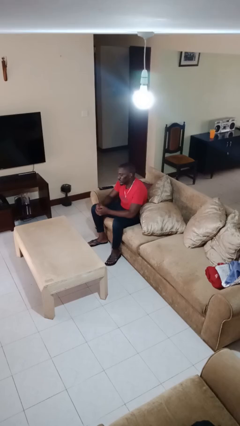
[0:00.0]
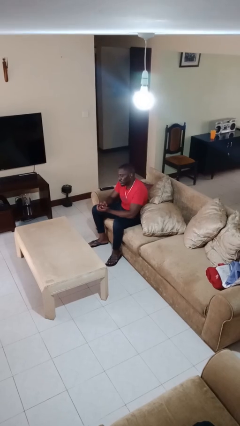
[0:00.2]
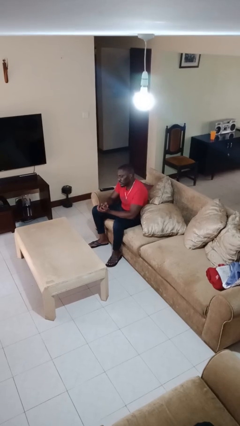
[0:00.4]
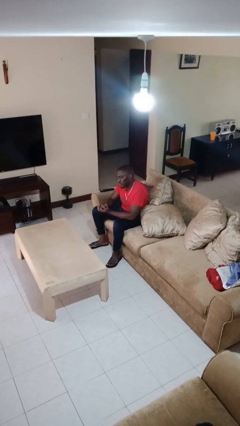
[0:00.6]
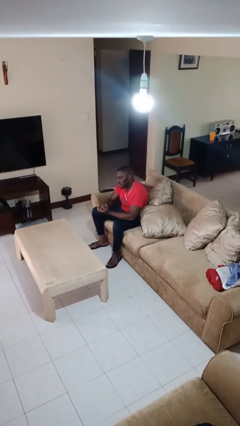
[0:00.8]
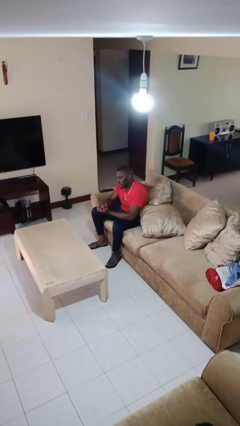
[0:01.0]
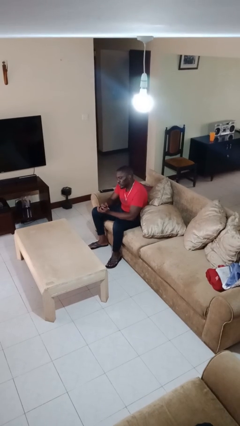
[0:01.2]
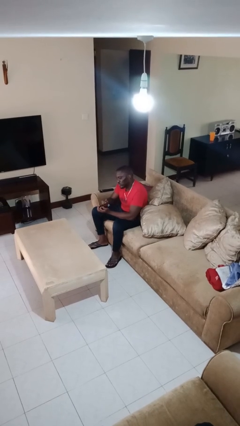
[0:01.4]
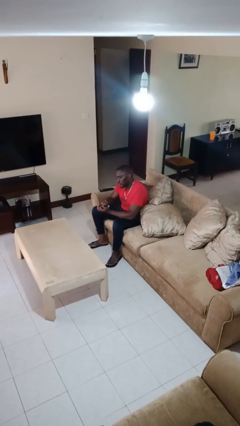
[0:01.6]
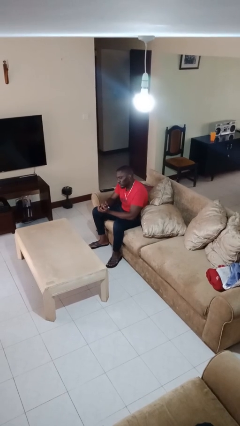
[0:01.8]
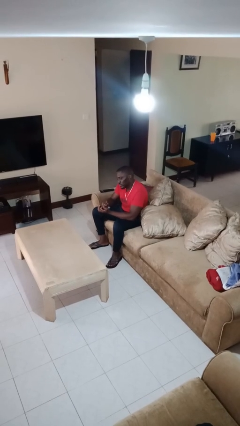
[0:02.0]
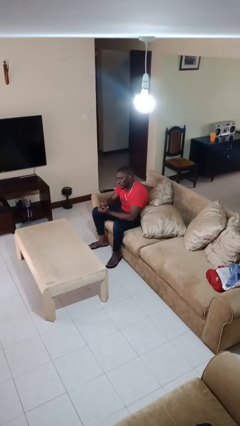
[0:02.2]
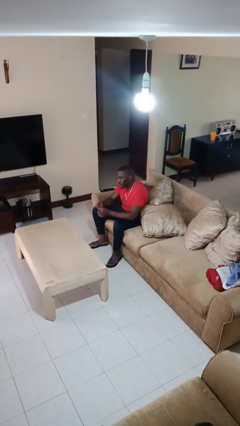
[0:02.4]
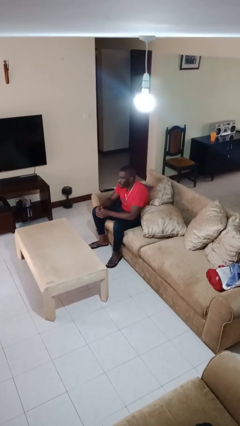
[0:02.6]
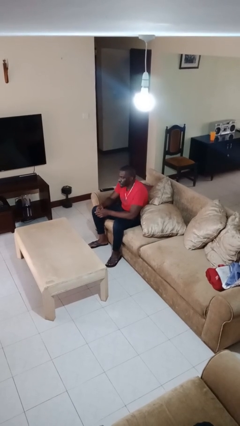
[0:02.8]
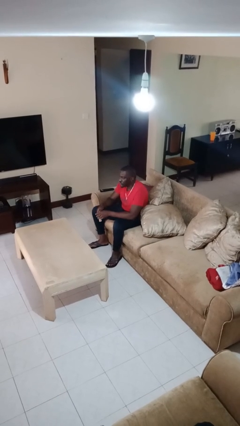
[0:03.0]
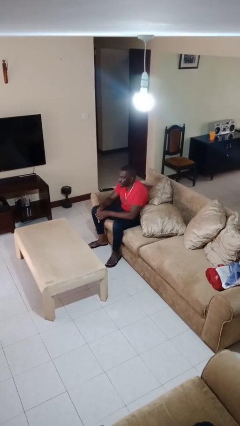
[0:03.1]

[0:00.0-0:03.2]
person clips fingernails

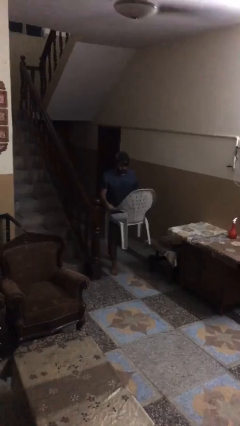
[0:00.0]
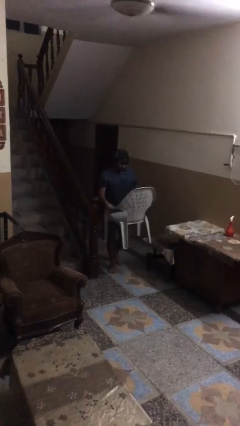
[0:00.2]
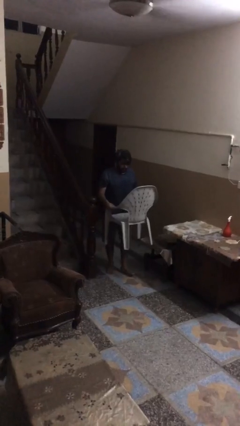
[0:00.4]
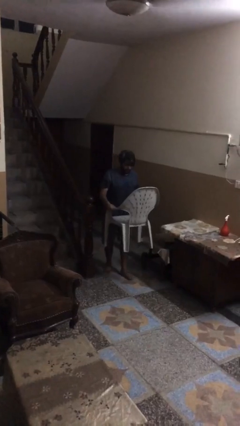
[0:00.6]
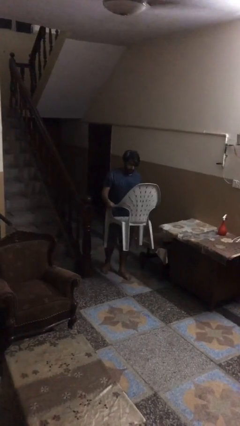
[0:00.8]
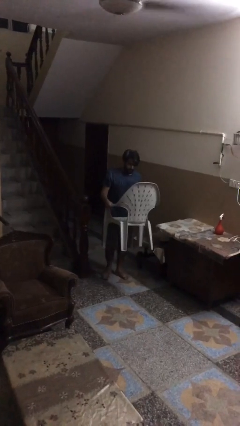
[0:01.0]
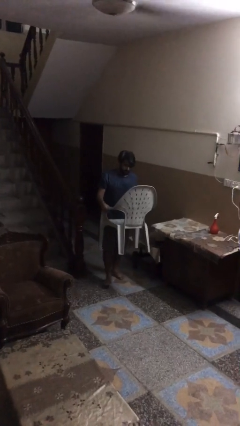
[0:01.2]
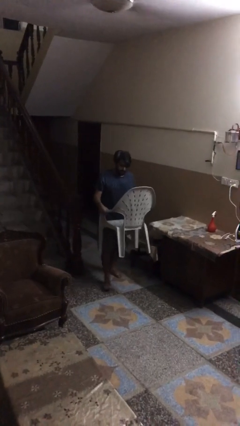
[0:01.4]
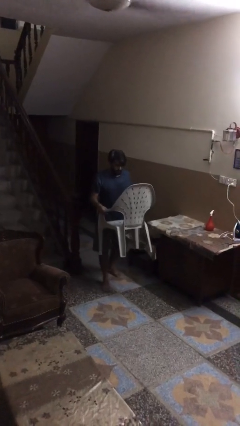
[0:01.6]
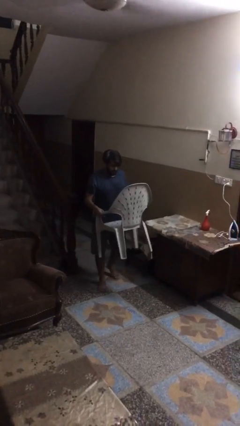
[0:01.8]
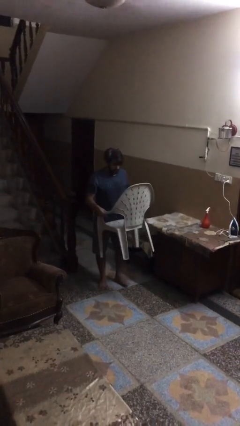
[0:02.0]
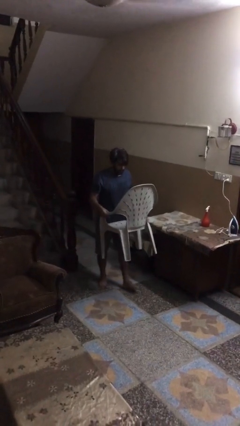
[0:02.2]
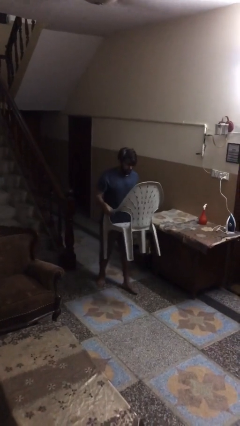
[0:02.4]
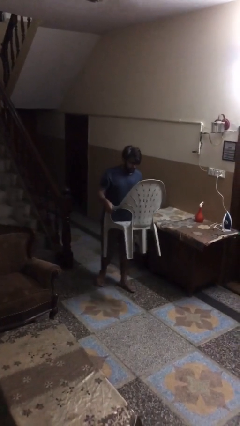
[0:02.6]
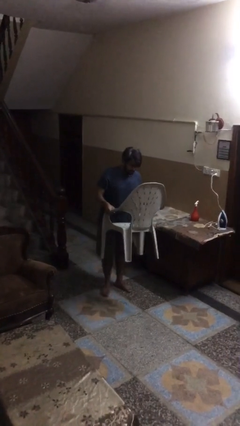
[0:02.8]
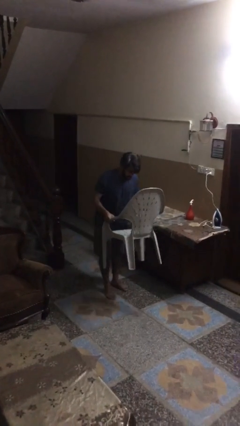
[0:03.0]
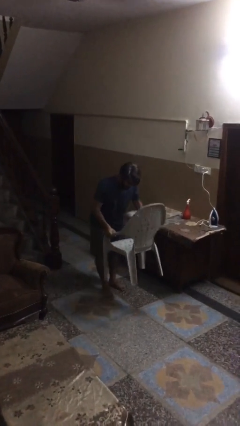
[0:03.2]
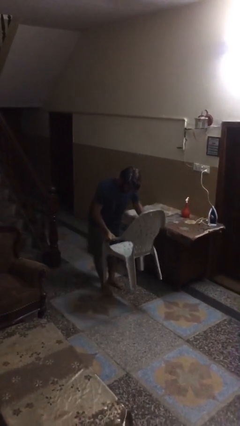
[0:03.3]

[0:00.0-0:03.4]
person carries heavy object

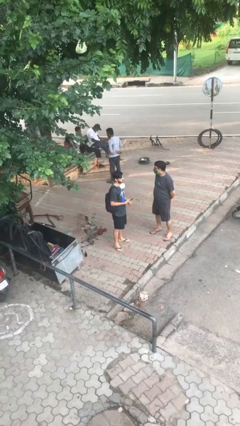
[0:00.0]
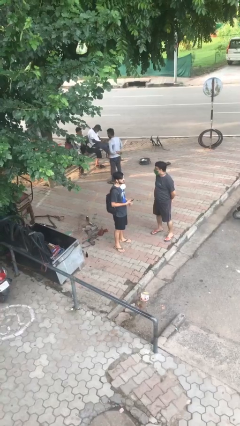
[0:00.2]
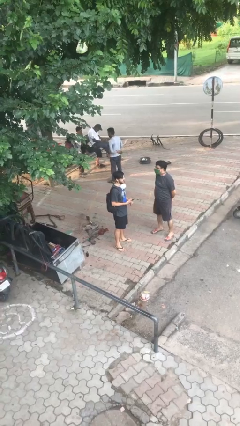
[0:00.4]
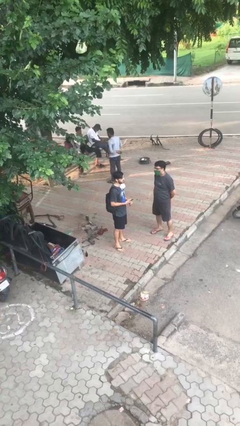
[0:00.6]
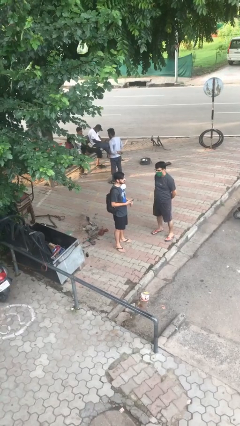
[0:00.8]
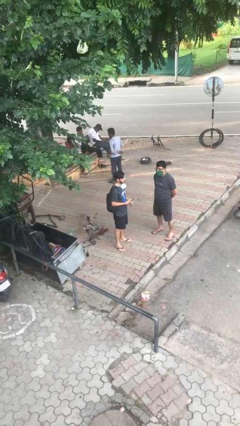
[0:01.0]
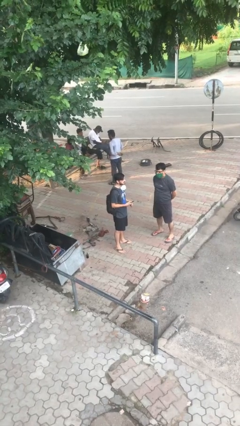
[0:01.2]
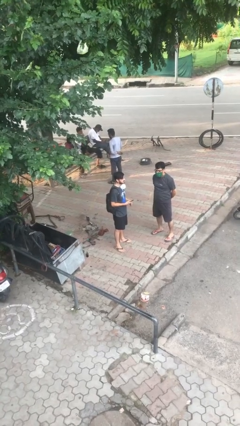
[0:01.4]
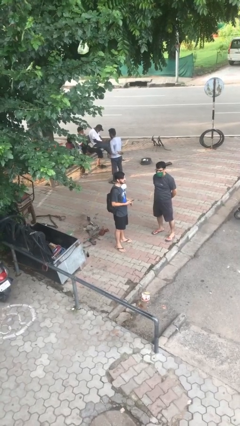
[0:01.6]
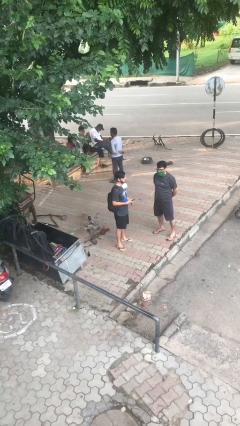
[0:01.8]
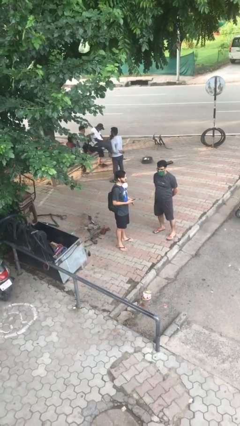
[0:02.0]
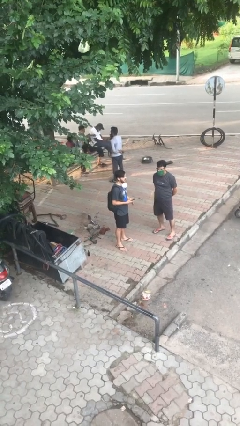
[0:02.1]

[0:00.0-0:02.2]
person talks to person

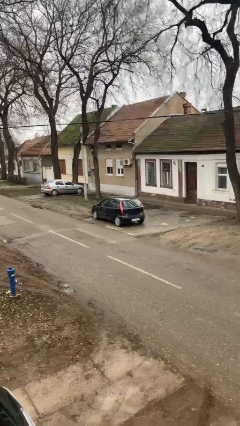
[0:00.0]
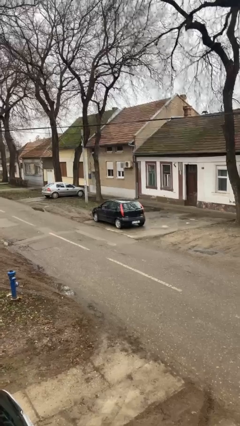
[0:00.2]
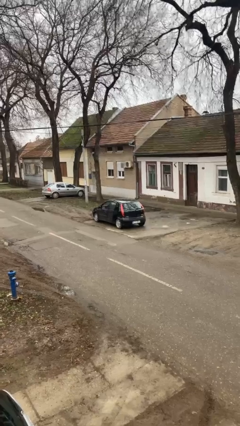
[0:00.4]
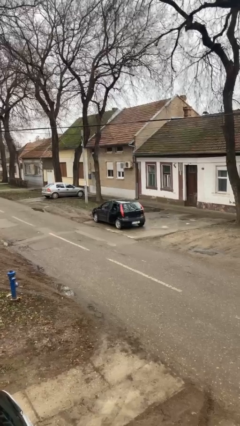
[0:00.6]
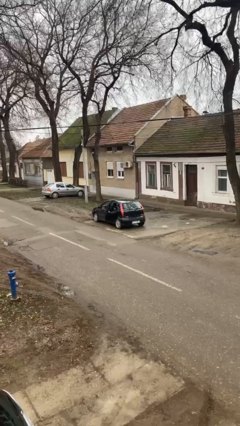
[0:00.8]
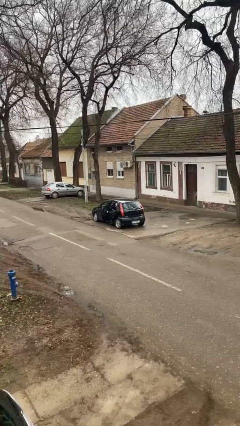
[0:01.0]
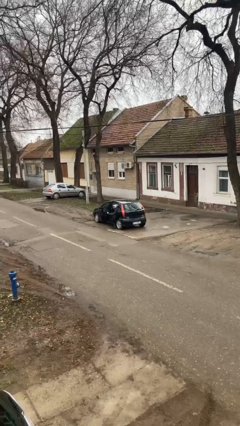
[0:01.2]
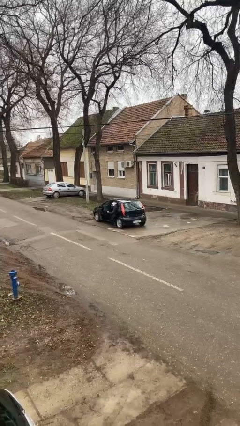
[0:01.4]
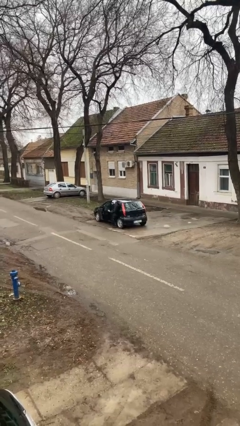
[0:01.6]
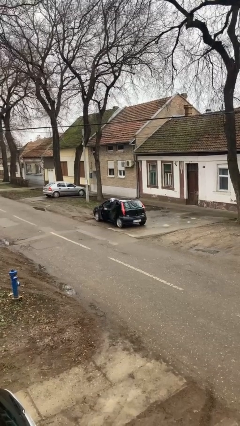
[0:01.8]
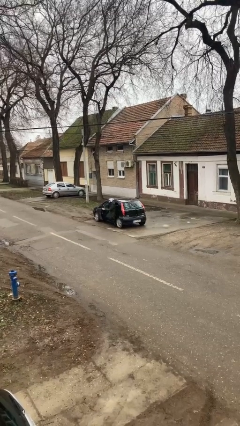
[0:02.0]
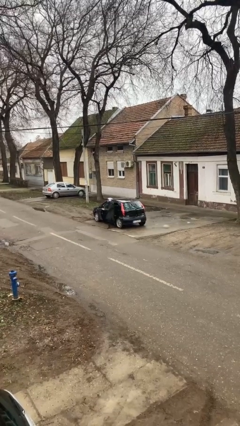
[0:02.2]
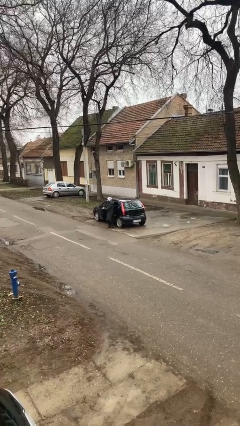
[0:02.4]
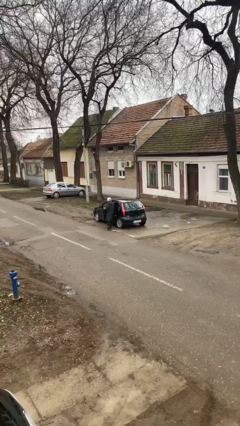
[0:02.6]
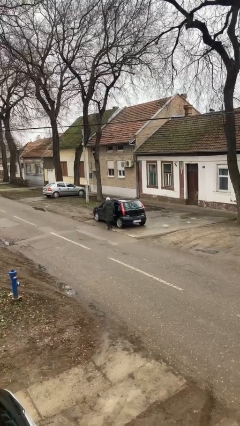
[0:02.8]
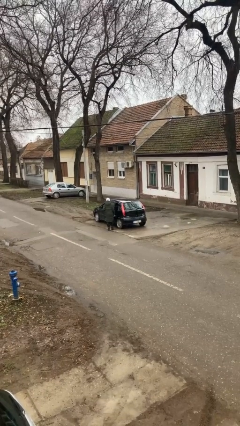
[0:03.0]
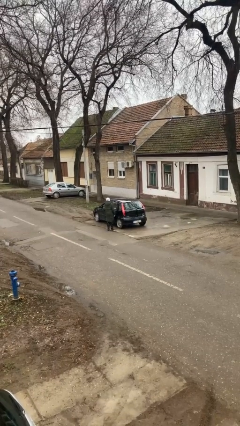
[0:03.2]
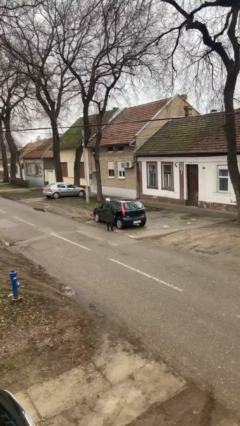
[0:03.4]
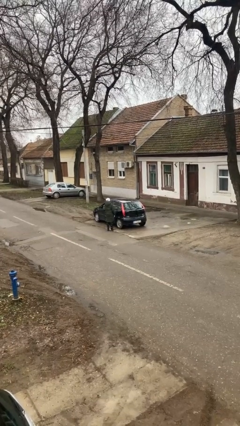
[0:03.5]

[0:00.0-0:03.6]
car drops off person

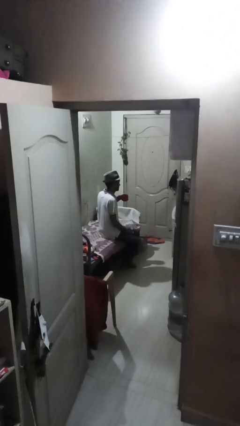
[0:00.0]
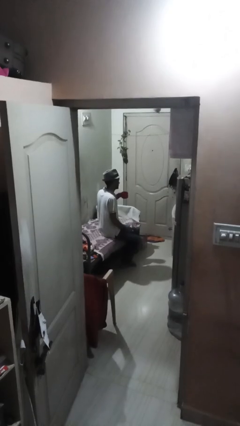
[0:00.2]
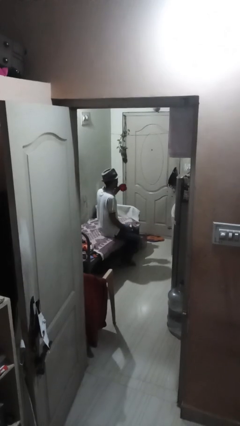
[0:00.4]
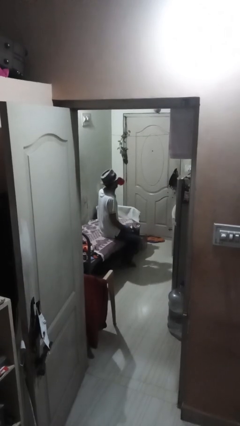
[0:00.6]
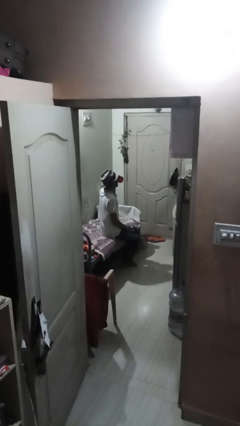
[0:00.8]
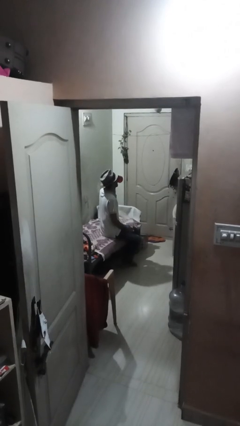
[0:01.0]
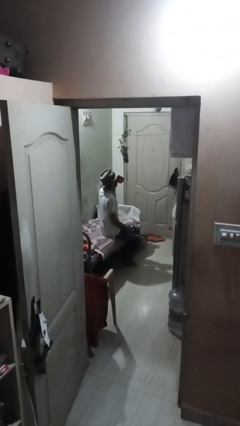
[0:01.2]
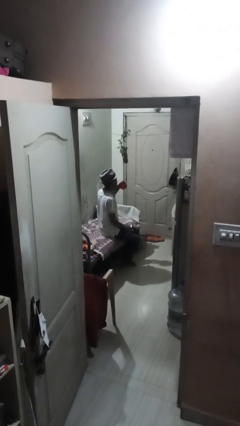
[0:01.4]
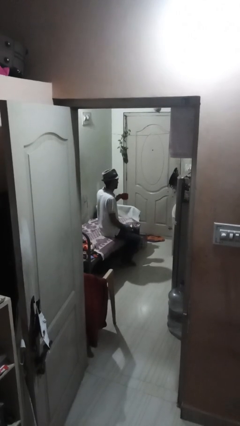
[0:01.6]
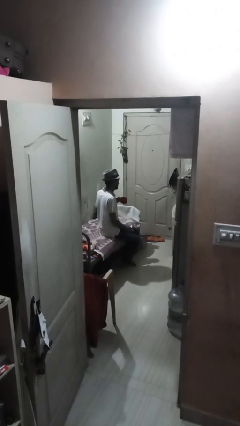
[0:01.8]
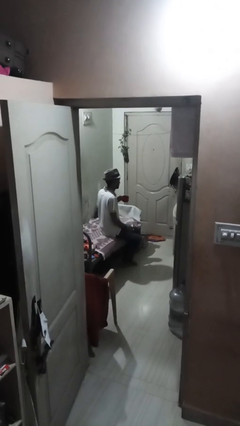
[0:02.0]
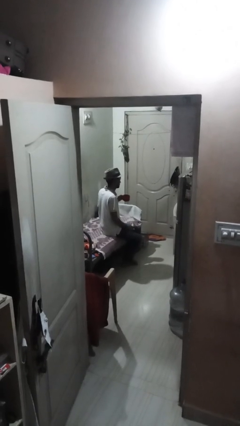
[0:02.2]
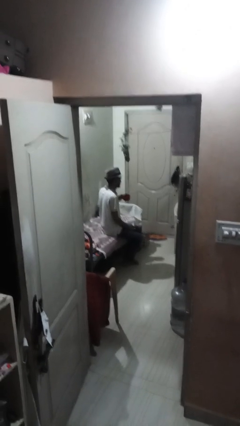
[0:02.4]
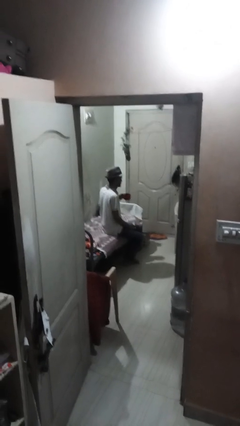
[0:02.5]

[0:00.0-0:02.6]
person drinks from mug

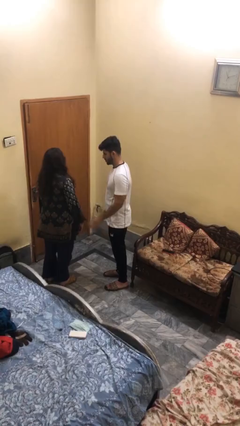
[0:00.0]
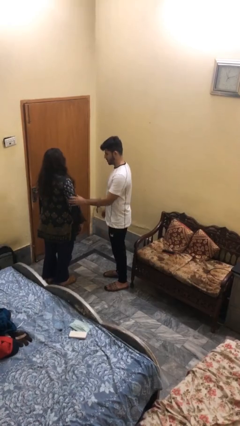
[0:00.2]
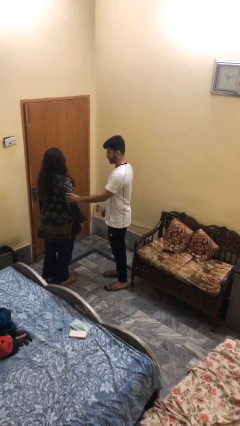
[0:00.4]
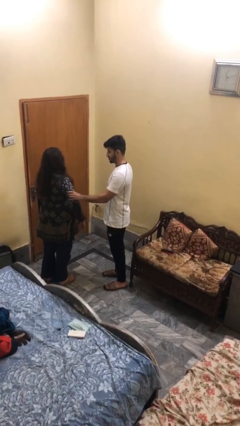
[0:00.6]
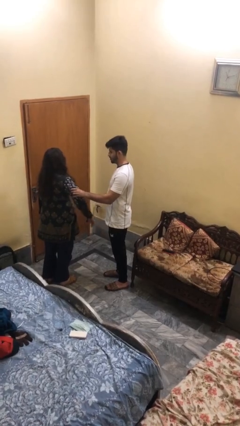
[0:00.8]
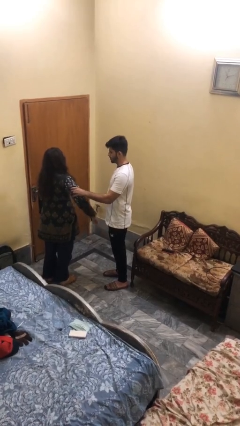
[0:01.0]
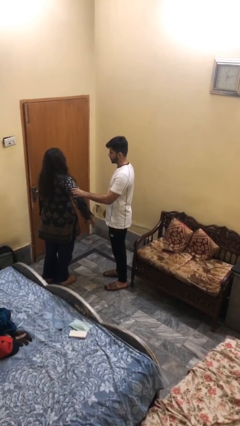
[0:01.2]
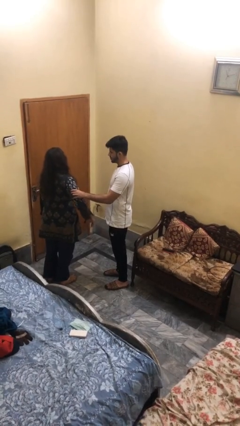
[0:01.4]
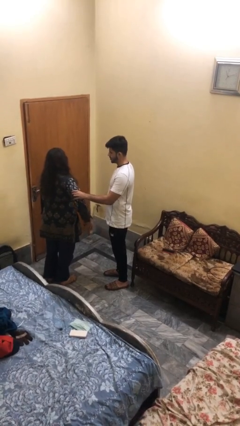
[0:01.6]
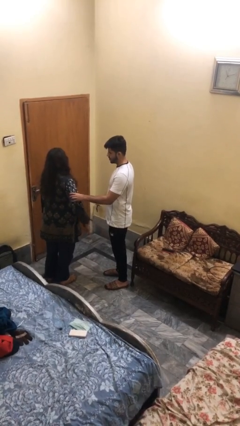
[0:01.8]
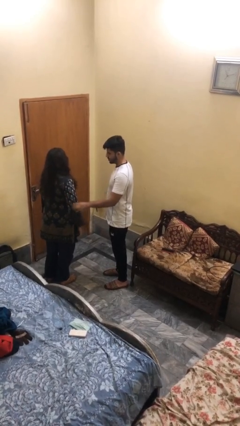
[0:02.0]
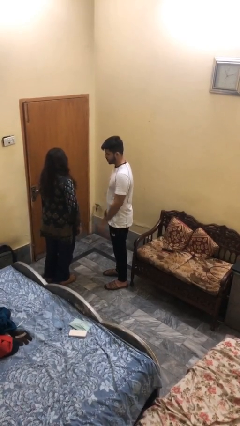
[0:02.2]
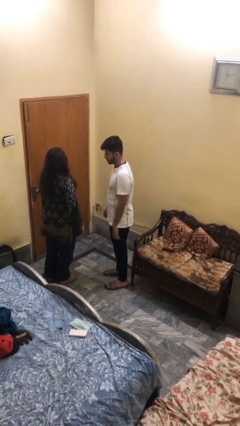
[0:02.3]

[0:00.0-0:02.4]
person grabs person by bicep
